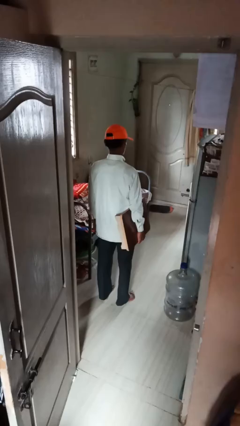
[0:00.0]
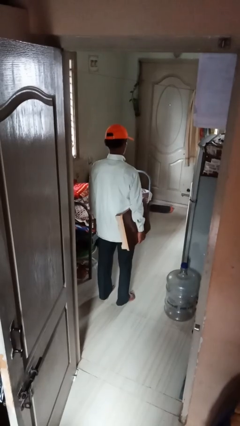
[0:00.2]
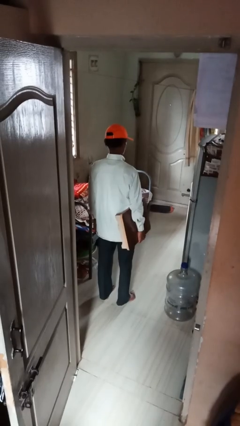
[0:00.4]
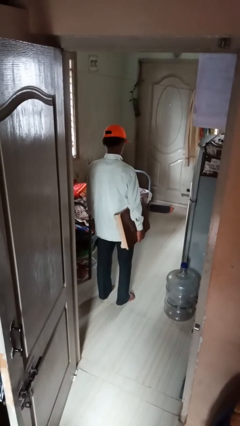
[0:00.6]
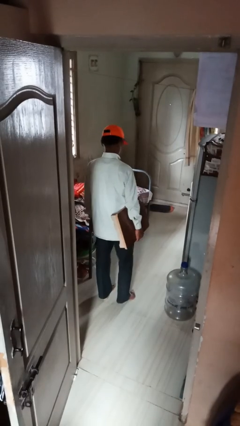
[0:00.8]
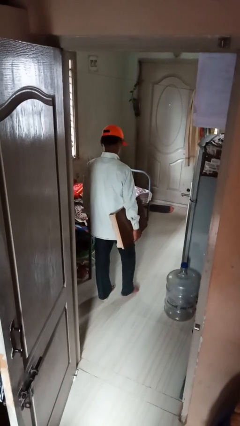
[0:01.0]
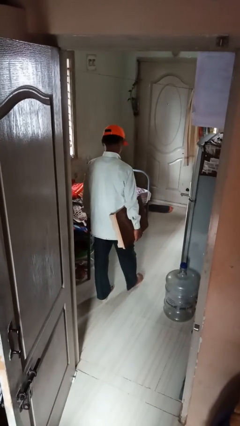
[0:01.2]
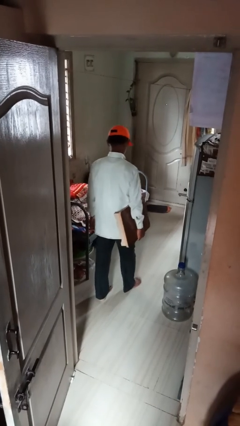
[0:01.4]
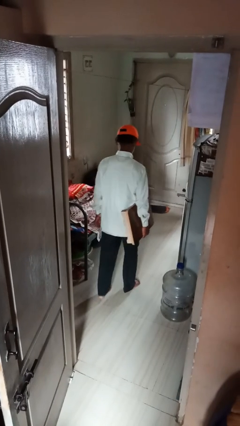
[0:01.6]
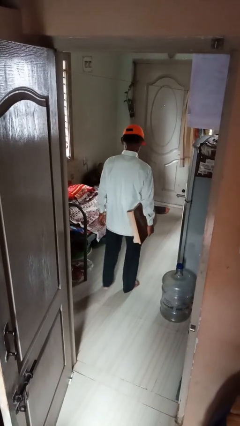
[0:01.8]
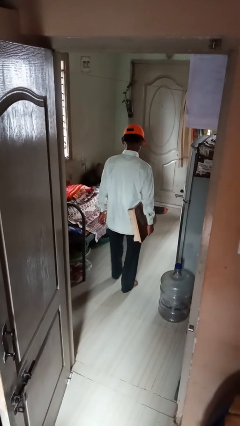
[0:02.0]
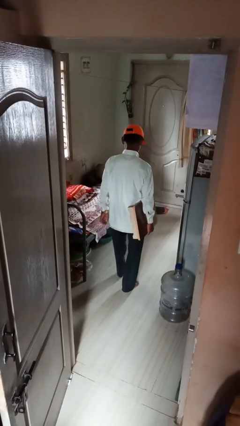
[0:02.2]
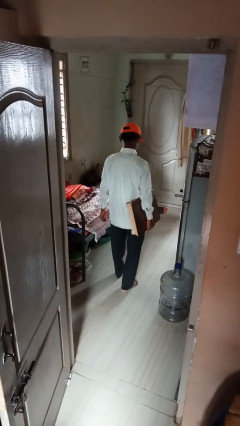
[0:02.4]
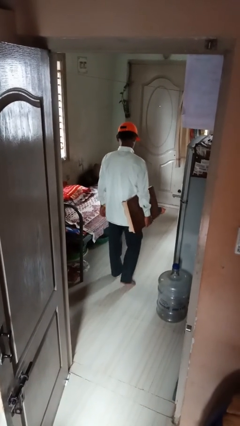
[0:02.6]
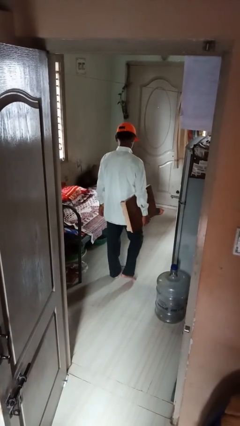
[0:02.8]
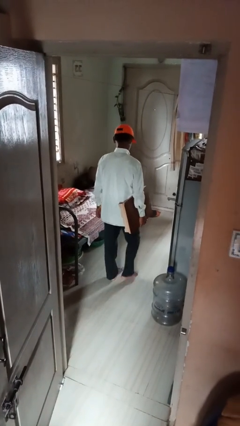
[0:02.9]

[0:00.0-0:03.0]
person carries furniture

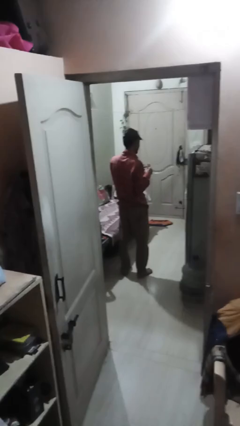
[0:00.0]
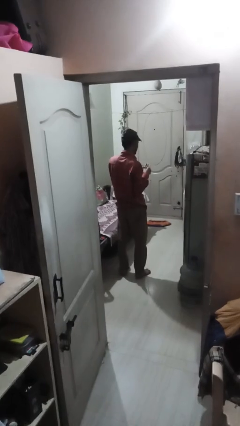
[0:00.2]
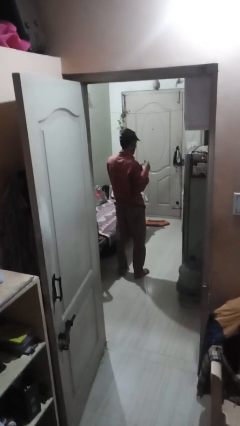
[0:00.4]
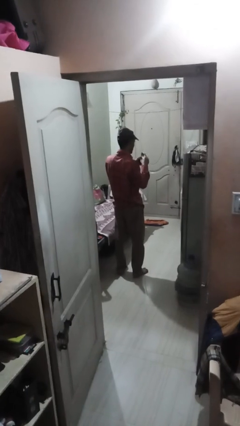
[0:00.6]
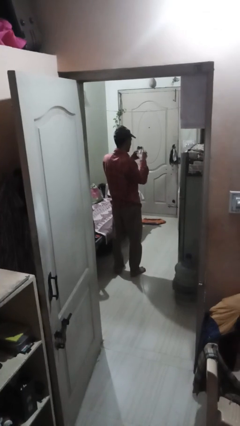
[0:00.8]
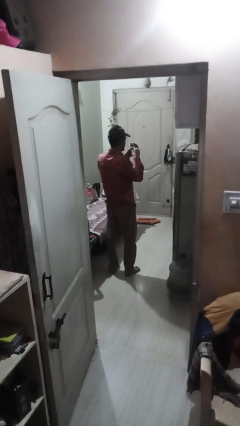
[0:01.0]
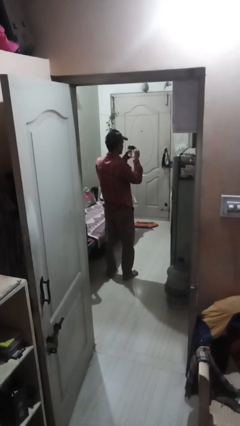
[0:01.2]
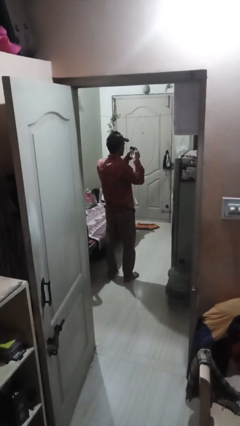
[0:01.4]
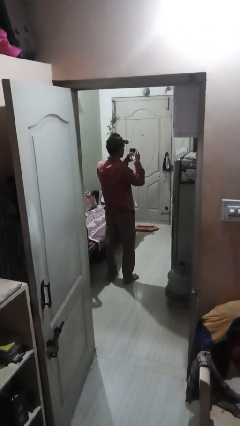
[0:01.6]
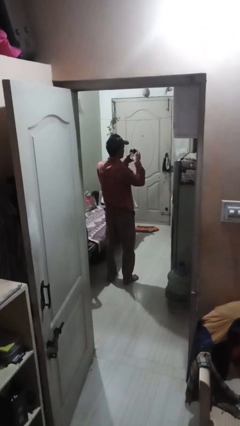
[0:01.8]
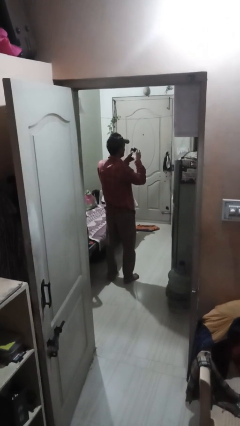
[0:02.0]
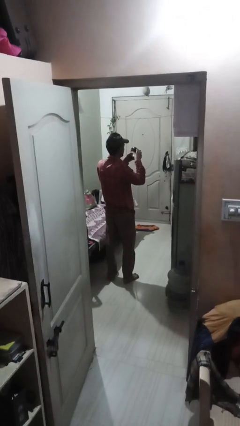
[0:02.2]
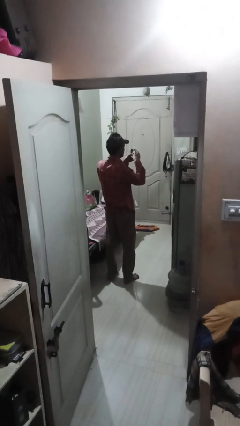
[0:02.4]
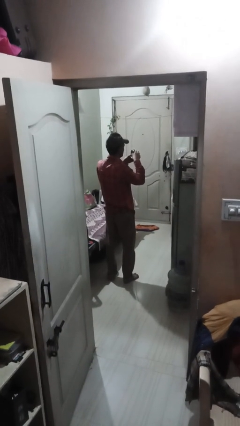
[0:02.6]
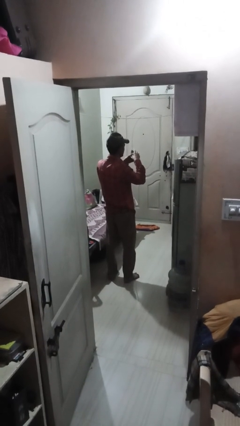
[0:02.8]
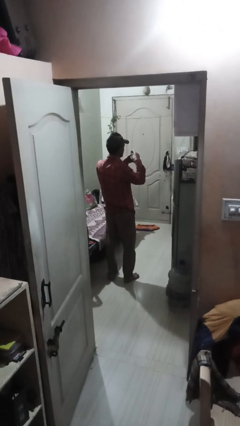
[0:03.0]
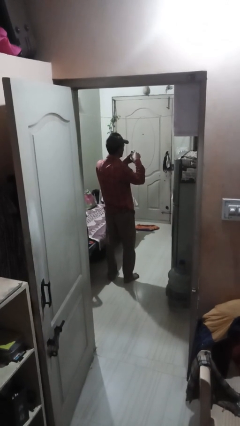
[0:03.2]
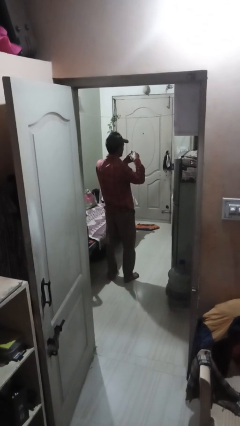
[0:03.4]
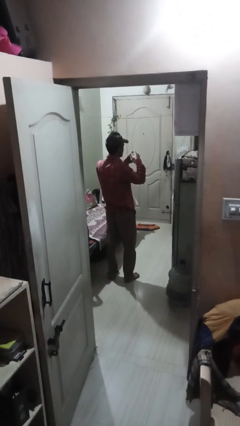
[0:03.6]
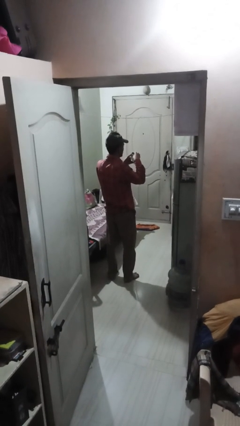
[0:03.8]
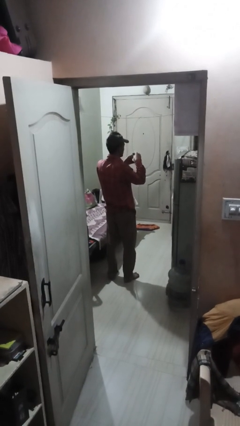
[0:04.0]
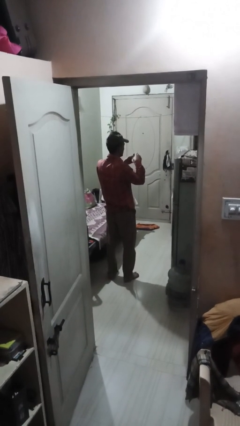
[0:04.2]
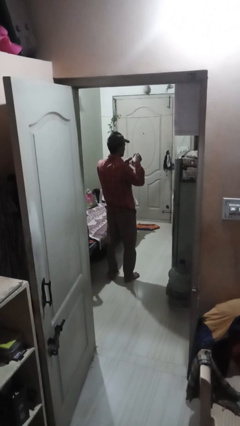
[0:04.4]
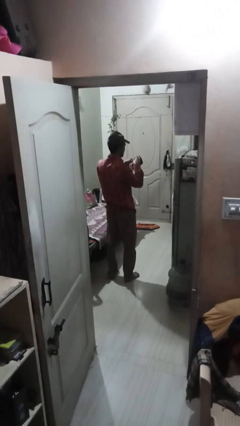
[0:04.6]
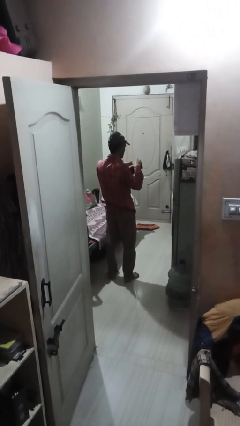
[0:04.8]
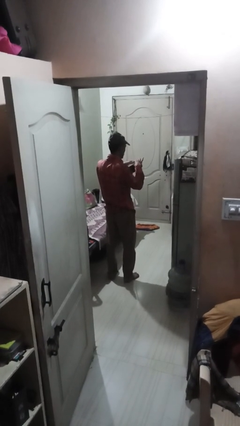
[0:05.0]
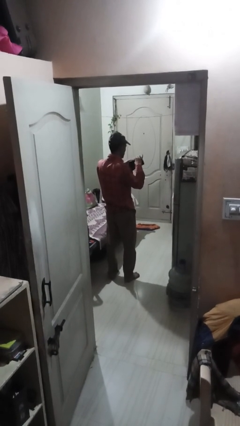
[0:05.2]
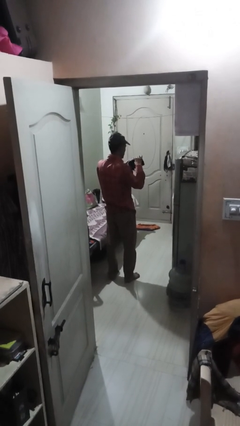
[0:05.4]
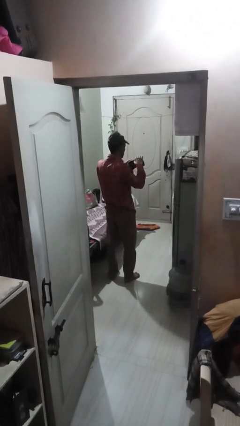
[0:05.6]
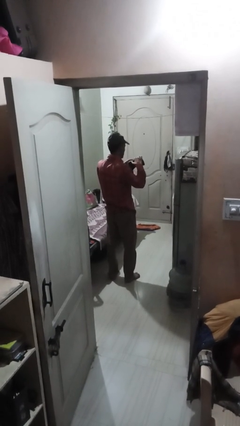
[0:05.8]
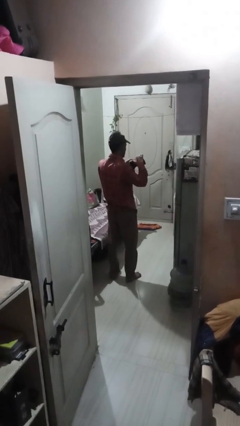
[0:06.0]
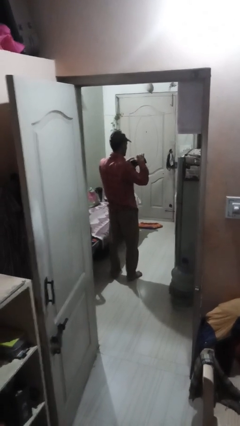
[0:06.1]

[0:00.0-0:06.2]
person searches in purse

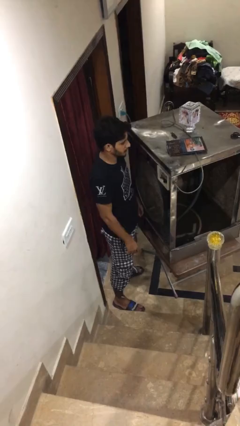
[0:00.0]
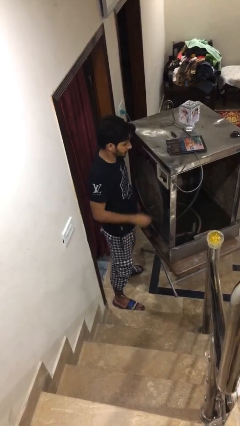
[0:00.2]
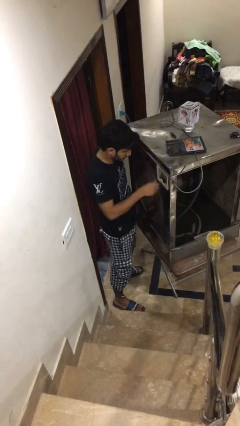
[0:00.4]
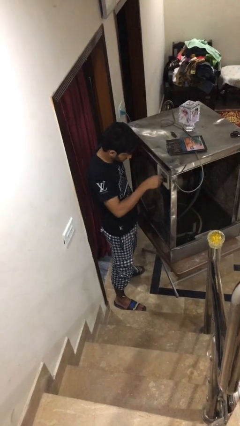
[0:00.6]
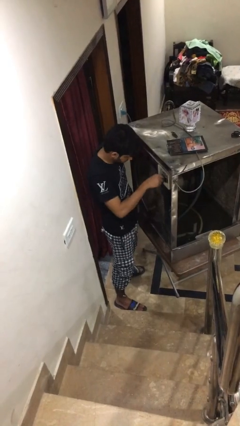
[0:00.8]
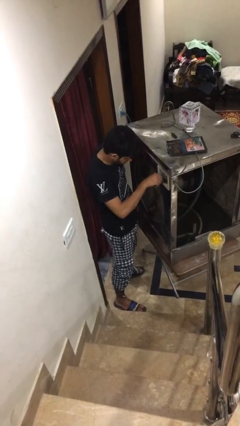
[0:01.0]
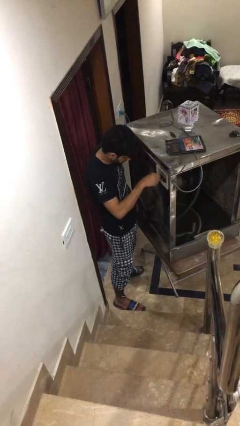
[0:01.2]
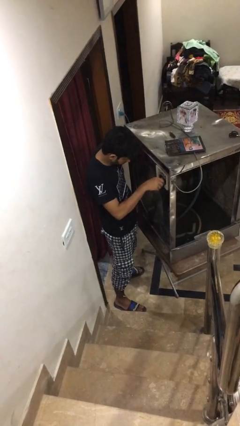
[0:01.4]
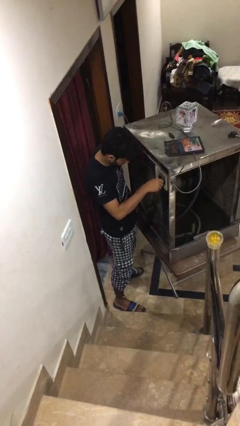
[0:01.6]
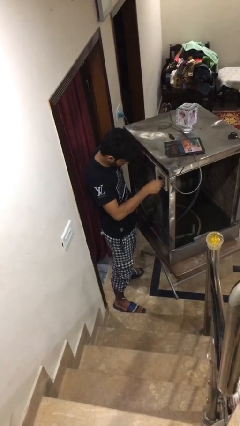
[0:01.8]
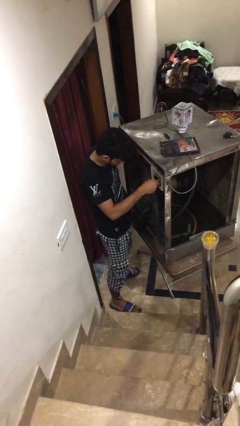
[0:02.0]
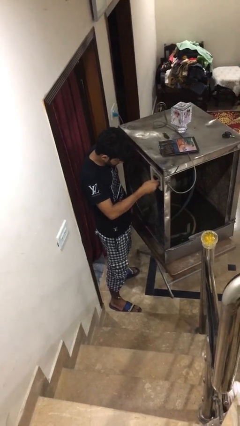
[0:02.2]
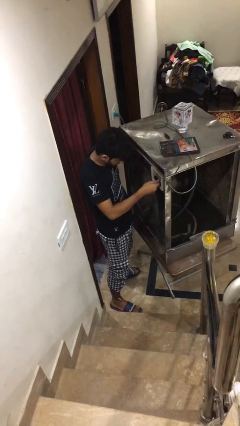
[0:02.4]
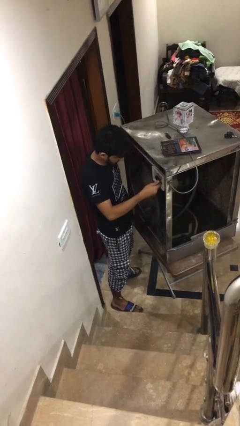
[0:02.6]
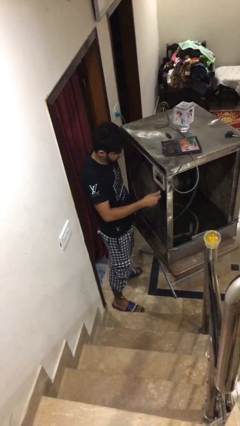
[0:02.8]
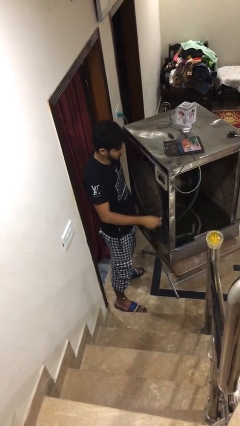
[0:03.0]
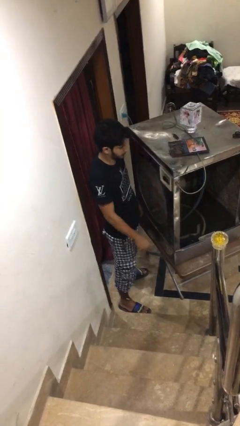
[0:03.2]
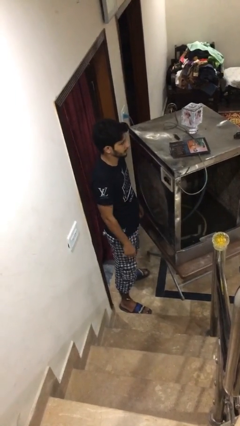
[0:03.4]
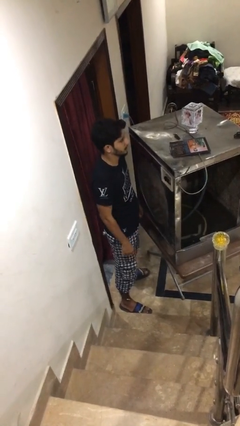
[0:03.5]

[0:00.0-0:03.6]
person adjusts thermostat

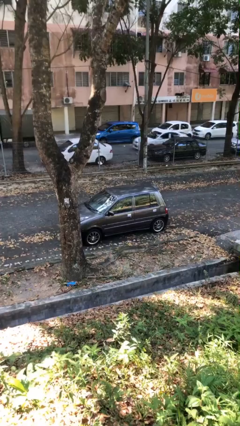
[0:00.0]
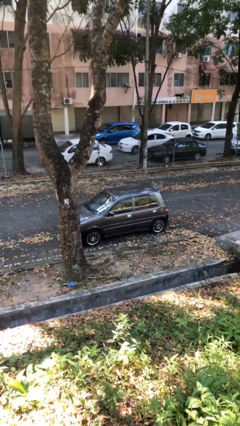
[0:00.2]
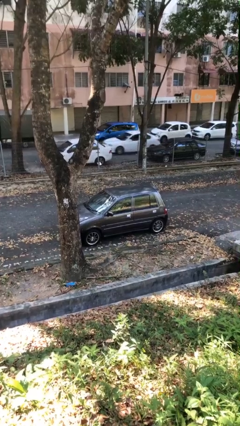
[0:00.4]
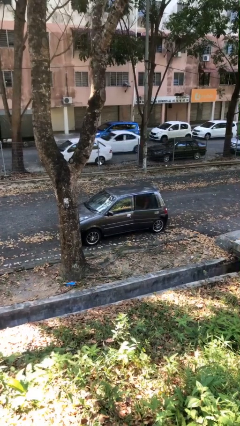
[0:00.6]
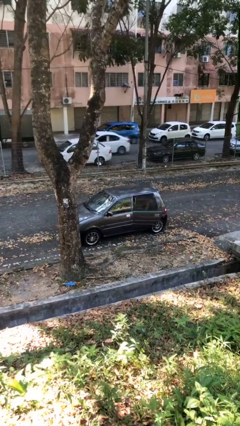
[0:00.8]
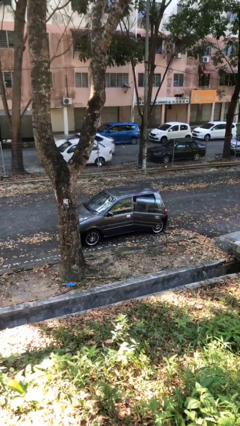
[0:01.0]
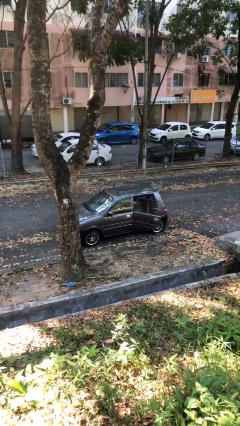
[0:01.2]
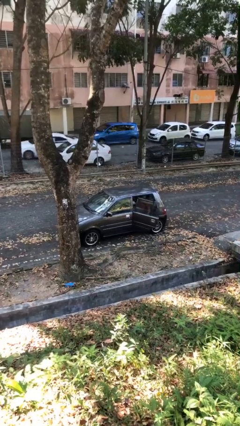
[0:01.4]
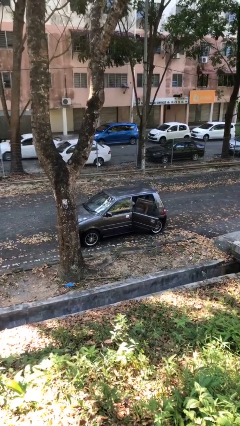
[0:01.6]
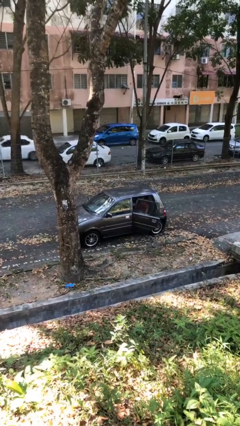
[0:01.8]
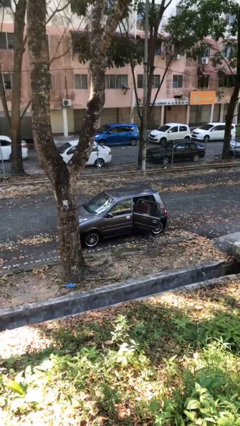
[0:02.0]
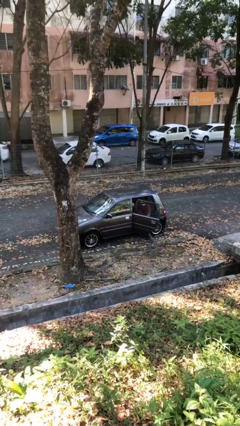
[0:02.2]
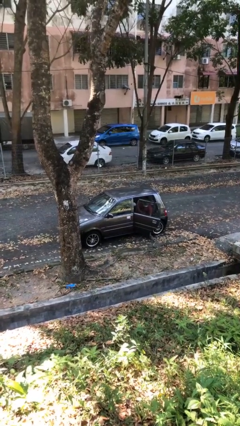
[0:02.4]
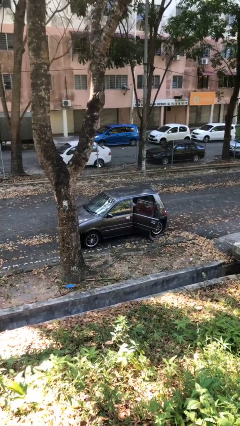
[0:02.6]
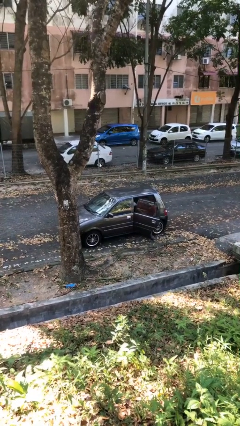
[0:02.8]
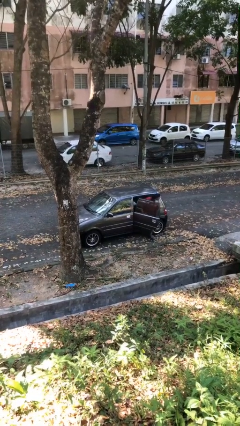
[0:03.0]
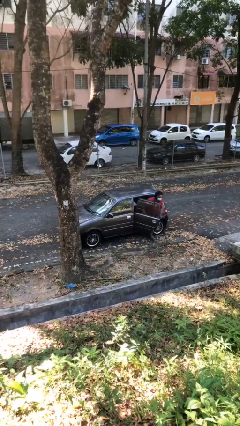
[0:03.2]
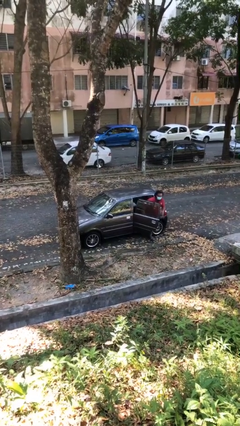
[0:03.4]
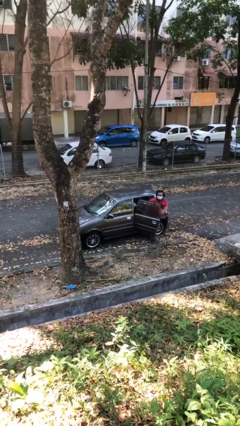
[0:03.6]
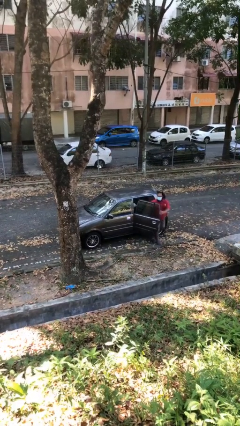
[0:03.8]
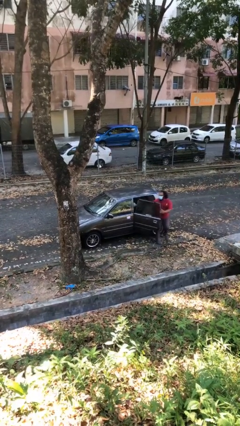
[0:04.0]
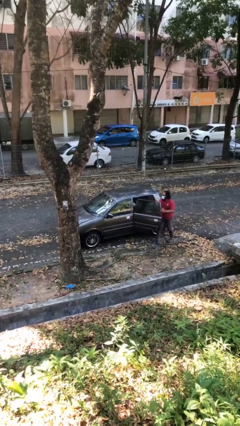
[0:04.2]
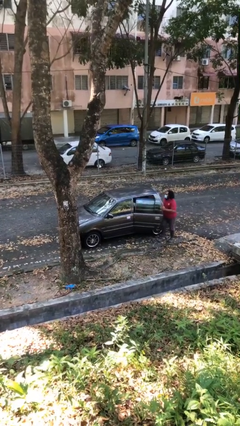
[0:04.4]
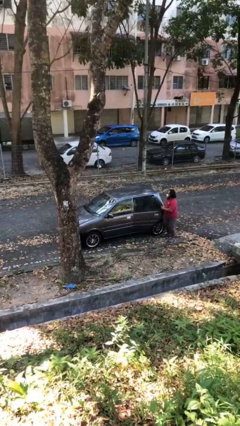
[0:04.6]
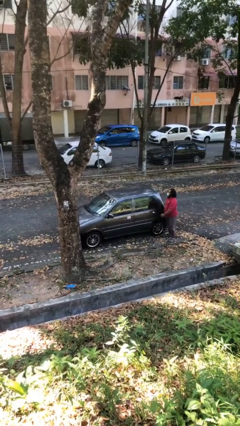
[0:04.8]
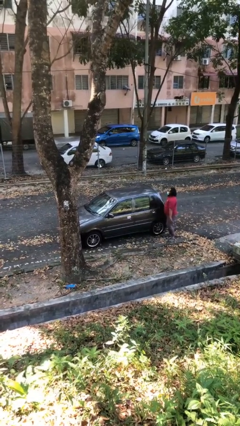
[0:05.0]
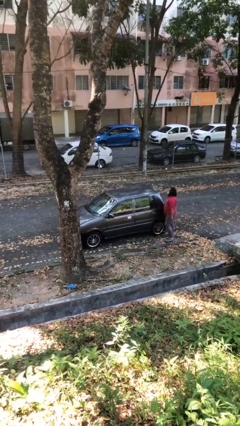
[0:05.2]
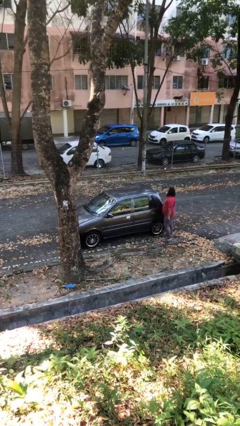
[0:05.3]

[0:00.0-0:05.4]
car drops off person
